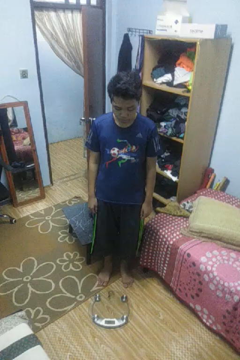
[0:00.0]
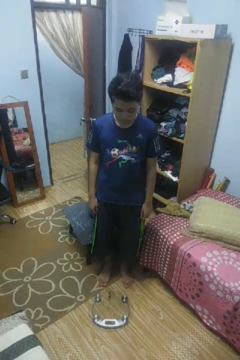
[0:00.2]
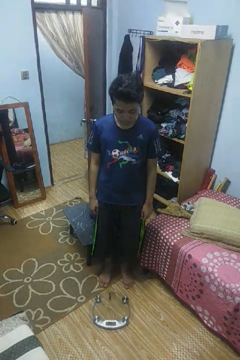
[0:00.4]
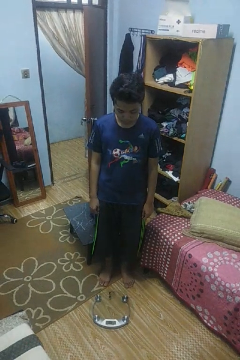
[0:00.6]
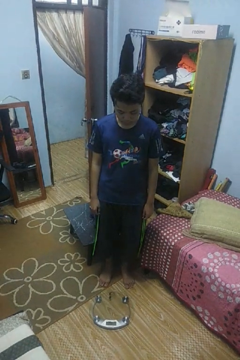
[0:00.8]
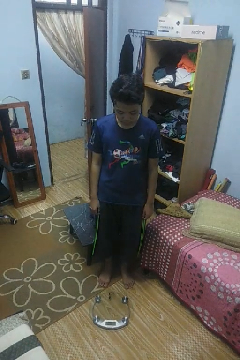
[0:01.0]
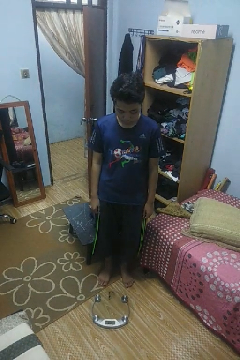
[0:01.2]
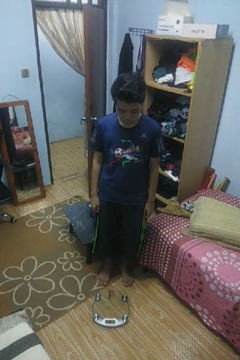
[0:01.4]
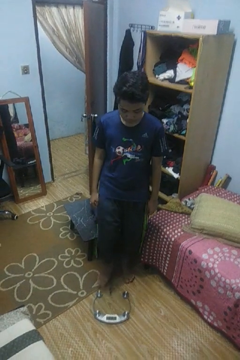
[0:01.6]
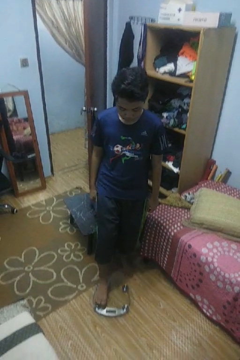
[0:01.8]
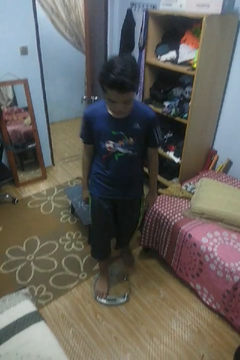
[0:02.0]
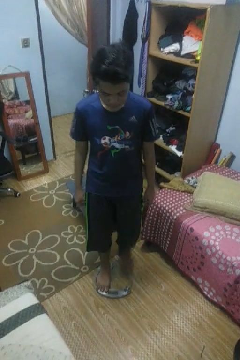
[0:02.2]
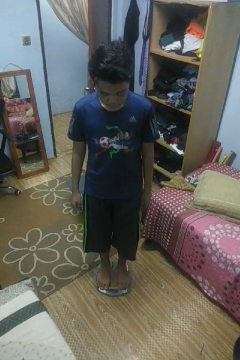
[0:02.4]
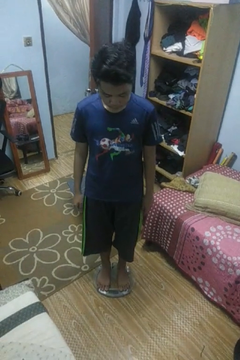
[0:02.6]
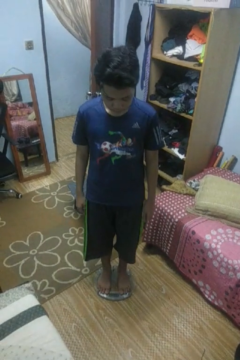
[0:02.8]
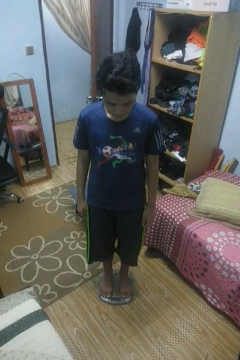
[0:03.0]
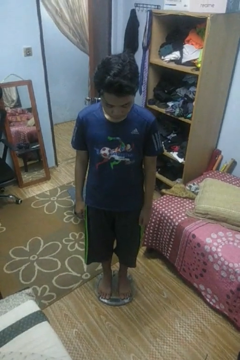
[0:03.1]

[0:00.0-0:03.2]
person uses bodyweight scale

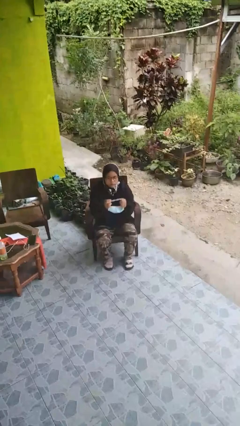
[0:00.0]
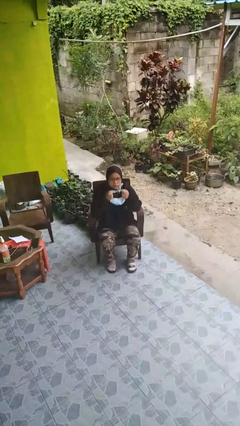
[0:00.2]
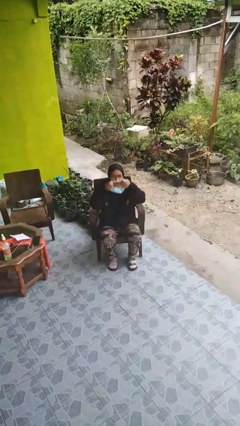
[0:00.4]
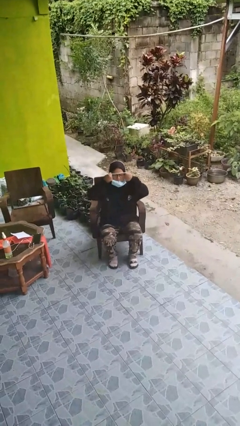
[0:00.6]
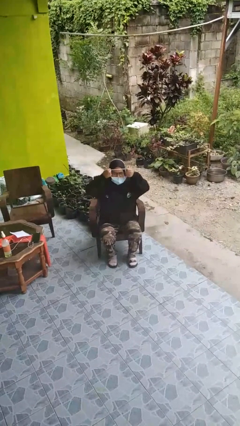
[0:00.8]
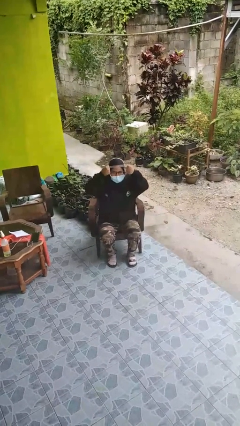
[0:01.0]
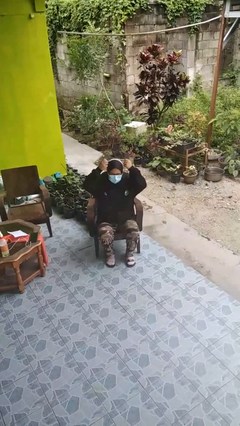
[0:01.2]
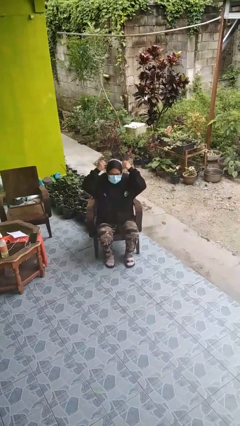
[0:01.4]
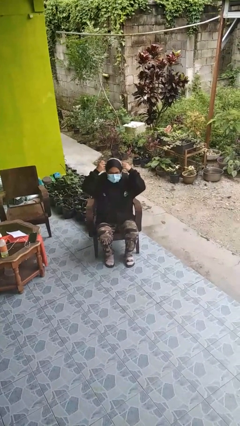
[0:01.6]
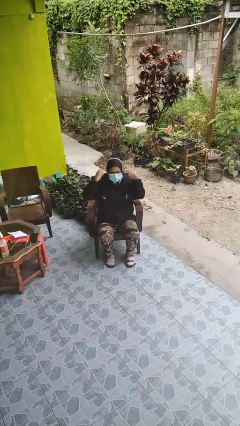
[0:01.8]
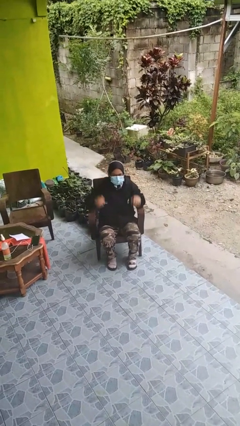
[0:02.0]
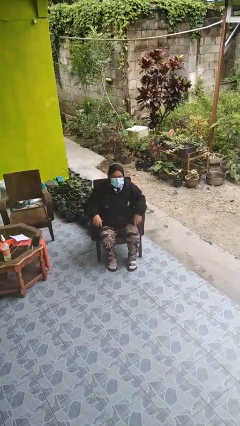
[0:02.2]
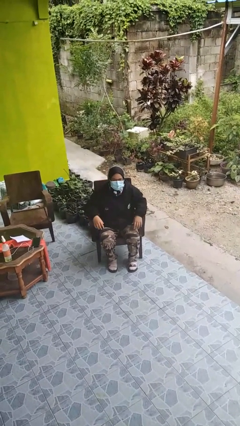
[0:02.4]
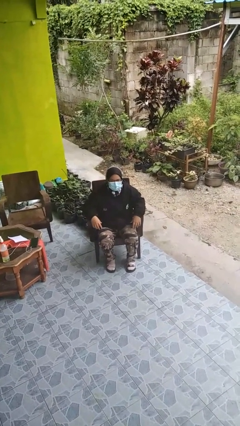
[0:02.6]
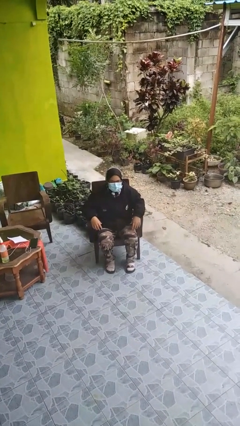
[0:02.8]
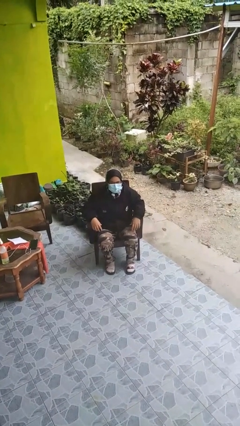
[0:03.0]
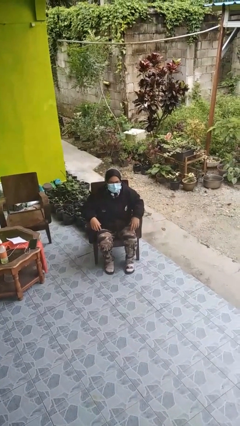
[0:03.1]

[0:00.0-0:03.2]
person puts on facemask

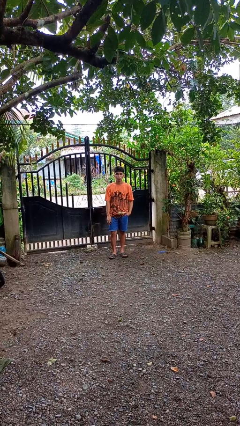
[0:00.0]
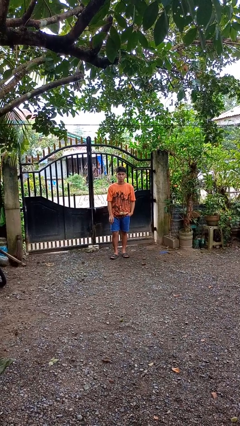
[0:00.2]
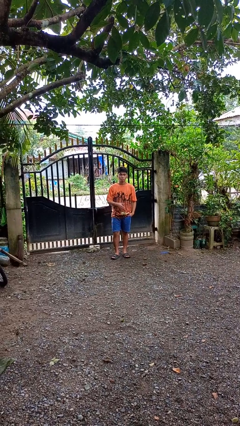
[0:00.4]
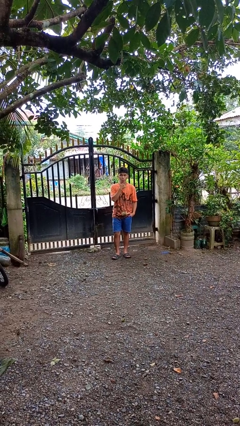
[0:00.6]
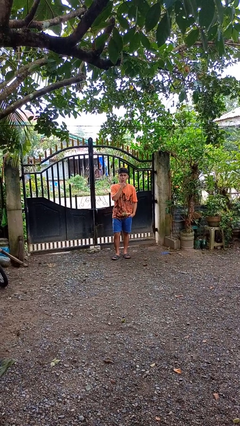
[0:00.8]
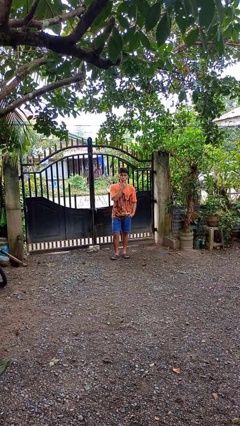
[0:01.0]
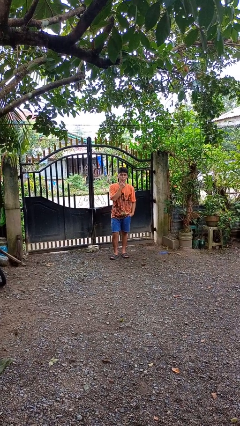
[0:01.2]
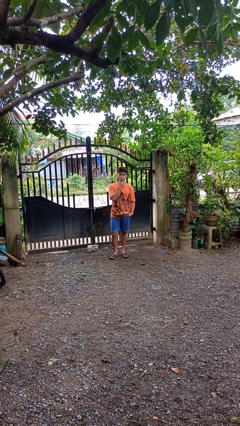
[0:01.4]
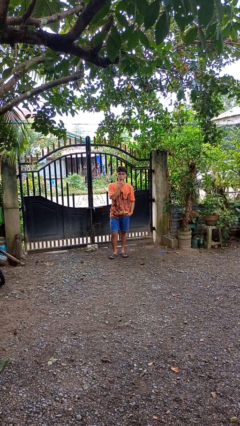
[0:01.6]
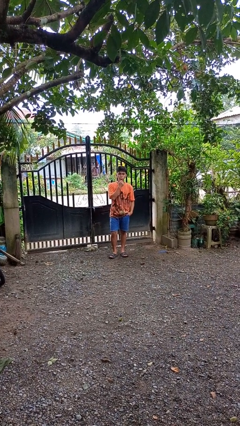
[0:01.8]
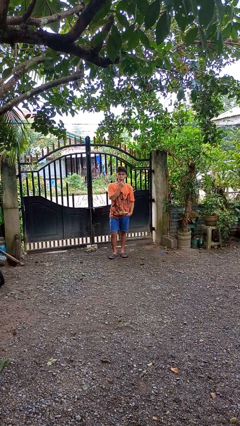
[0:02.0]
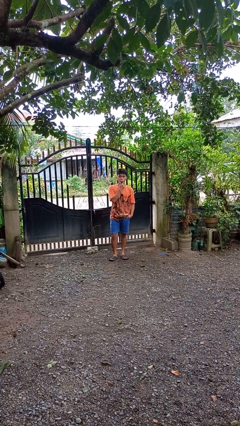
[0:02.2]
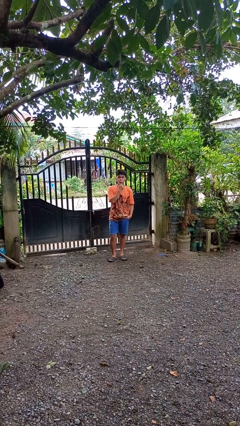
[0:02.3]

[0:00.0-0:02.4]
person strokes chin

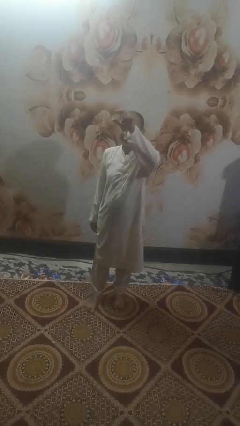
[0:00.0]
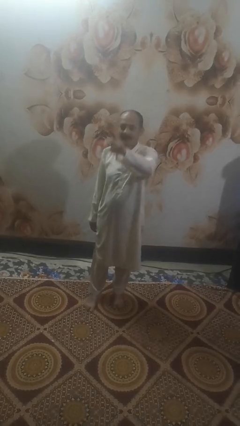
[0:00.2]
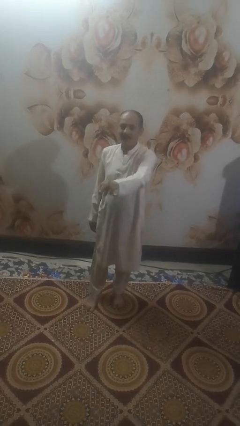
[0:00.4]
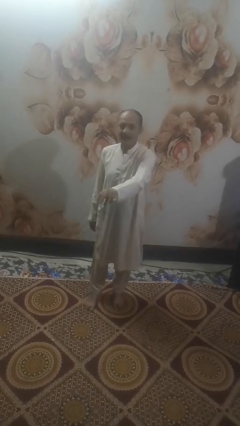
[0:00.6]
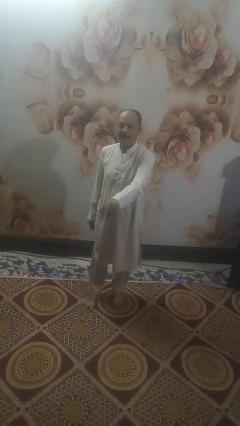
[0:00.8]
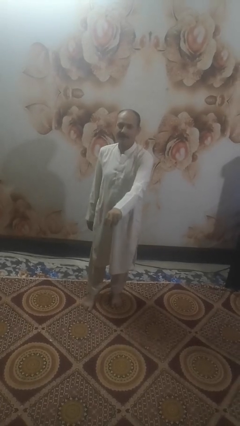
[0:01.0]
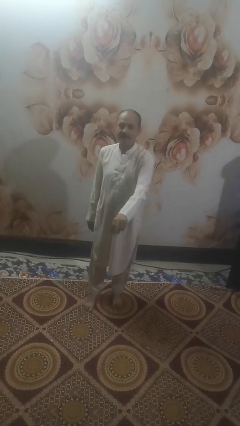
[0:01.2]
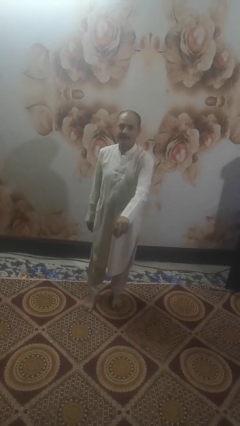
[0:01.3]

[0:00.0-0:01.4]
person gestures swipe down

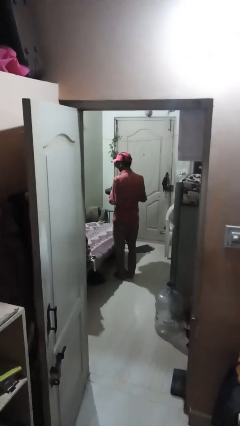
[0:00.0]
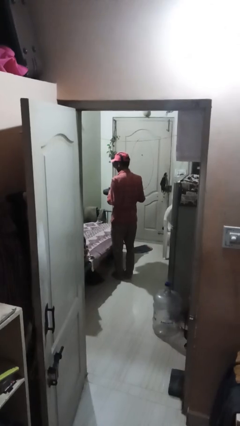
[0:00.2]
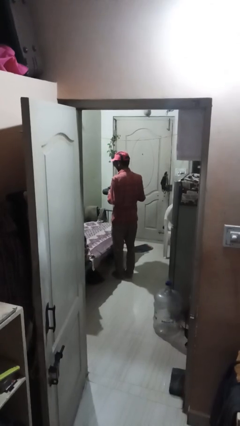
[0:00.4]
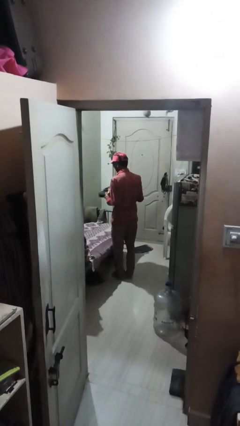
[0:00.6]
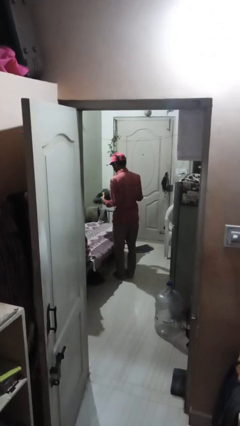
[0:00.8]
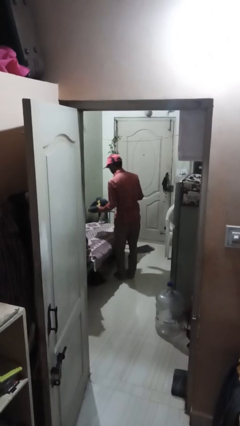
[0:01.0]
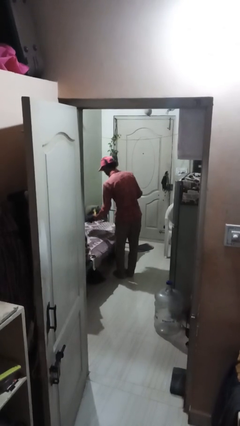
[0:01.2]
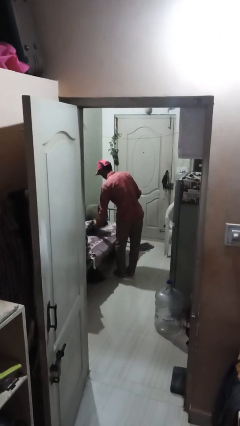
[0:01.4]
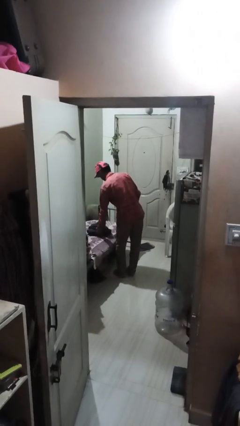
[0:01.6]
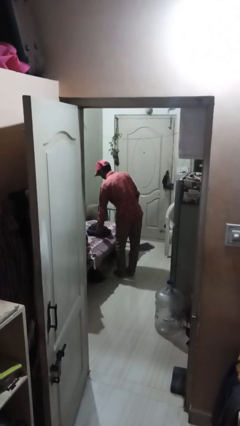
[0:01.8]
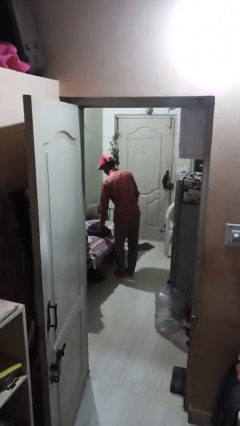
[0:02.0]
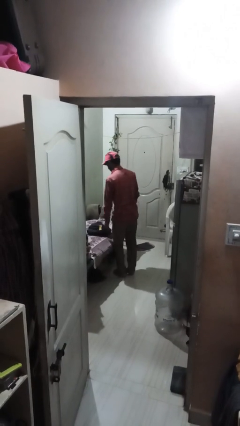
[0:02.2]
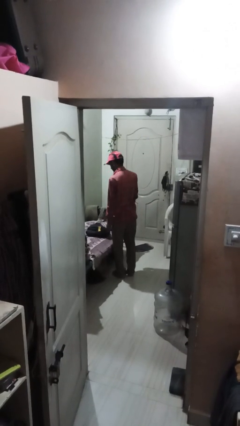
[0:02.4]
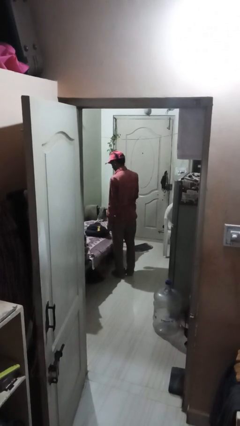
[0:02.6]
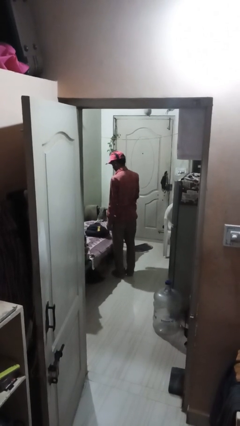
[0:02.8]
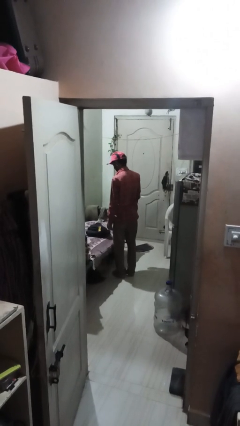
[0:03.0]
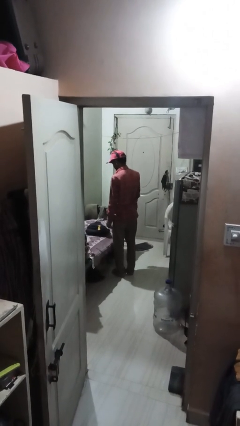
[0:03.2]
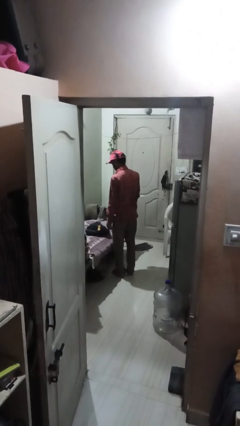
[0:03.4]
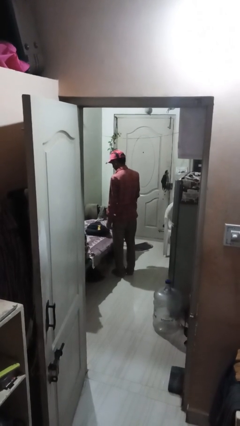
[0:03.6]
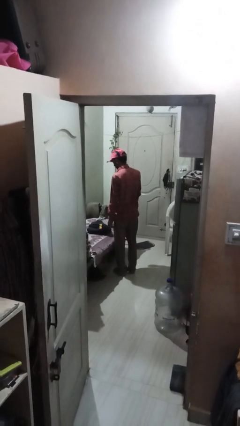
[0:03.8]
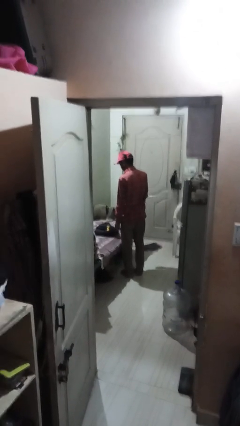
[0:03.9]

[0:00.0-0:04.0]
person puts down object on bed

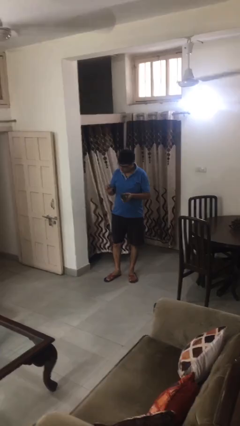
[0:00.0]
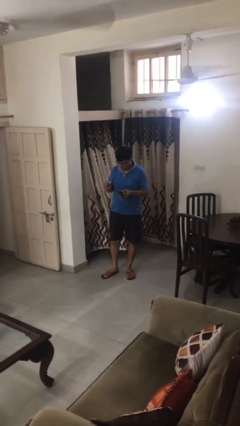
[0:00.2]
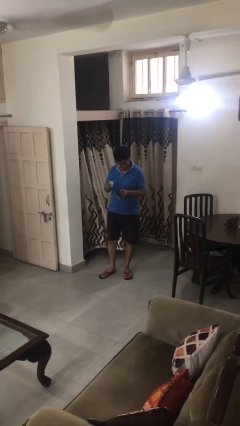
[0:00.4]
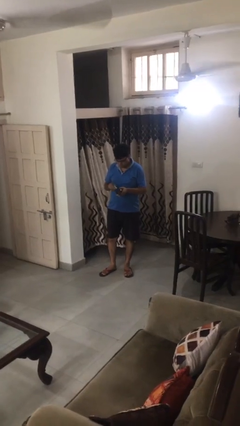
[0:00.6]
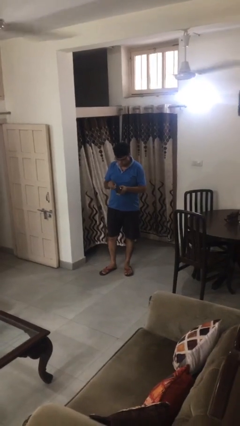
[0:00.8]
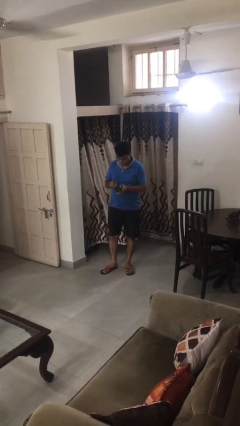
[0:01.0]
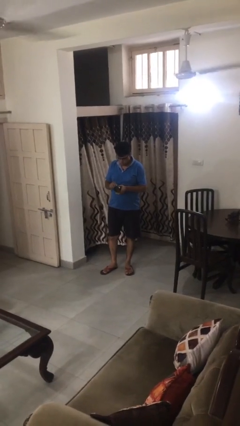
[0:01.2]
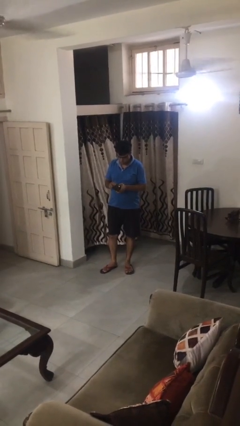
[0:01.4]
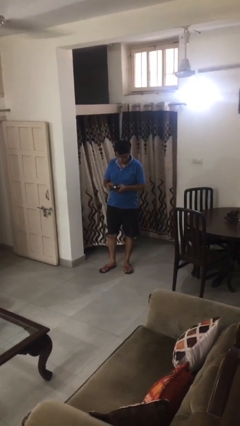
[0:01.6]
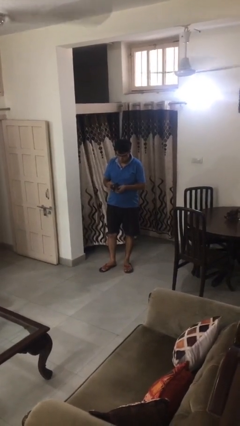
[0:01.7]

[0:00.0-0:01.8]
person puts object into purse

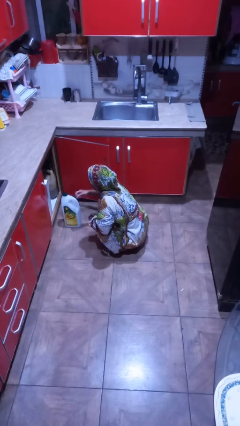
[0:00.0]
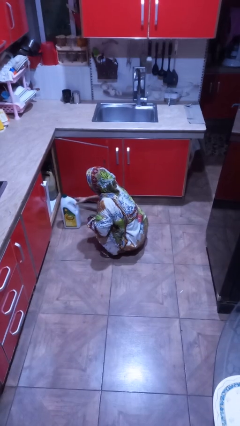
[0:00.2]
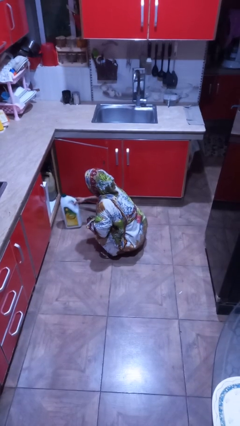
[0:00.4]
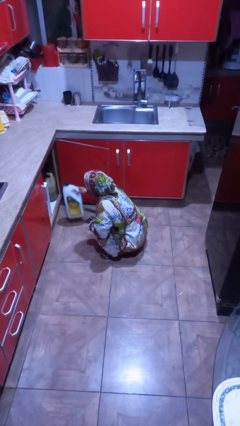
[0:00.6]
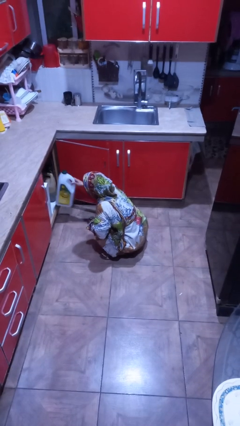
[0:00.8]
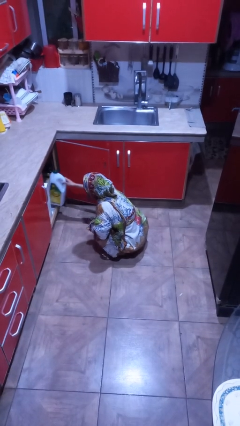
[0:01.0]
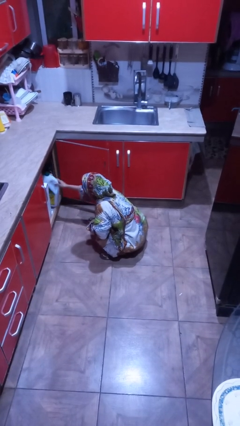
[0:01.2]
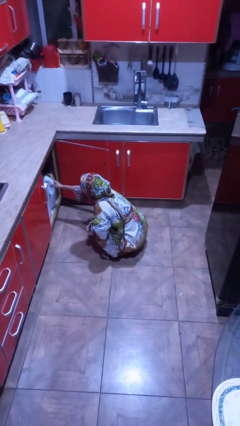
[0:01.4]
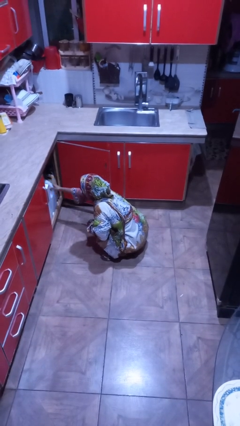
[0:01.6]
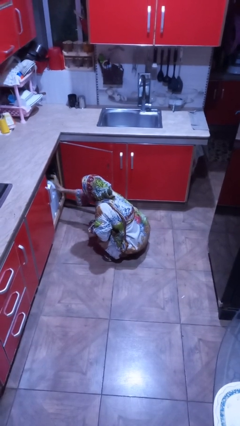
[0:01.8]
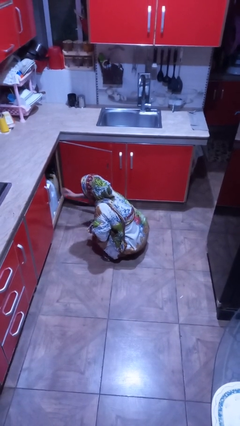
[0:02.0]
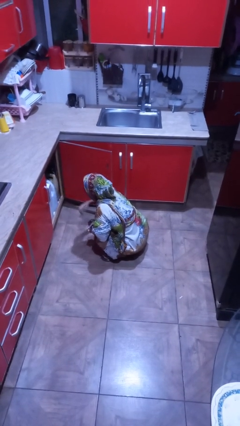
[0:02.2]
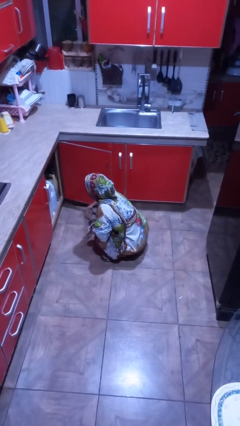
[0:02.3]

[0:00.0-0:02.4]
person puts object in cabinet
